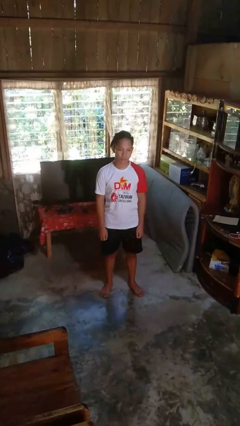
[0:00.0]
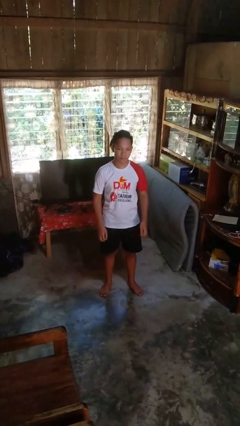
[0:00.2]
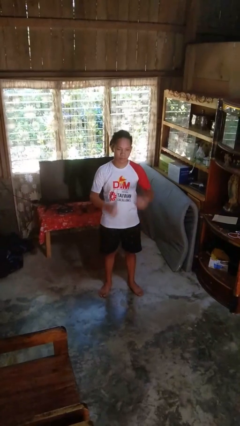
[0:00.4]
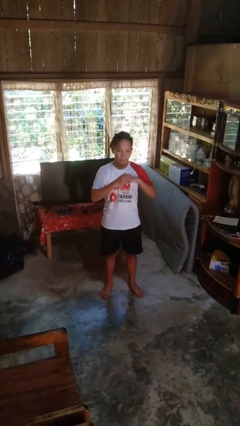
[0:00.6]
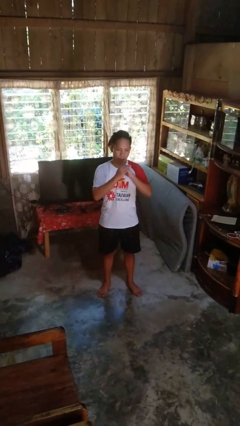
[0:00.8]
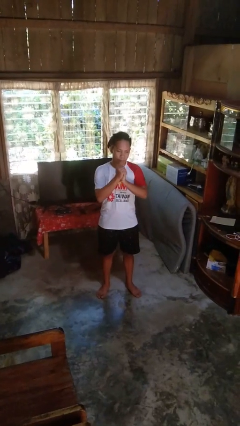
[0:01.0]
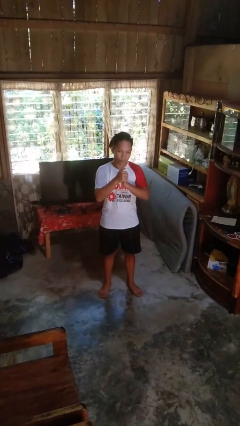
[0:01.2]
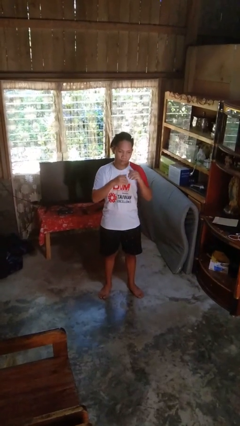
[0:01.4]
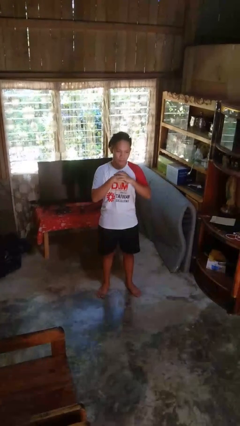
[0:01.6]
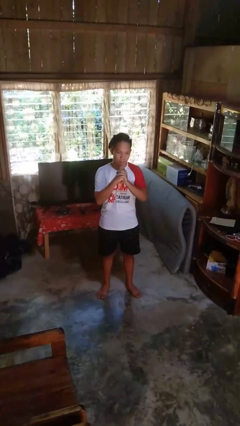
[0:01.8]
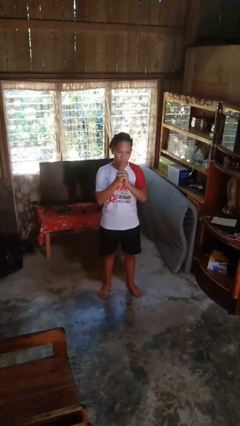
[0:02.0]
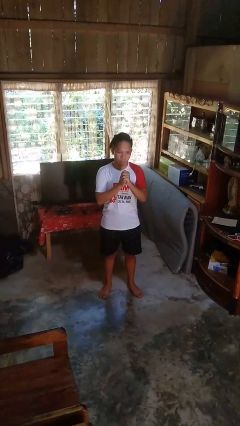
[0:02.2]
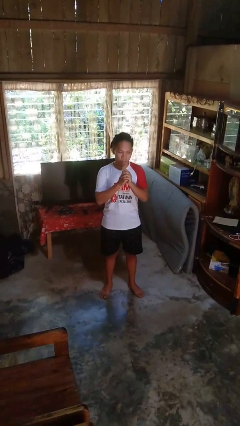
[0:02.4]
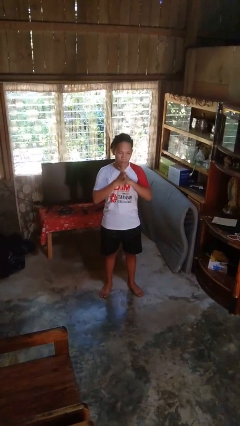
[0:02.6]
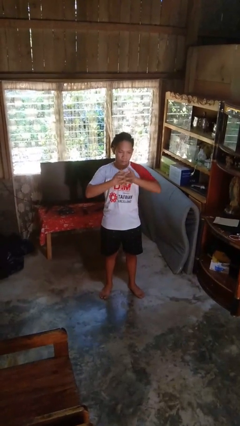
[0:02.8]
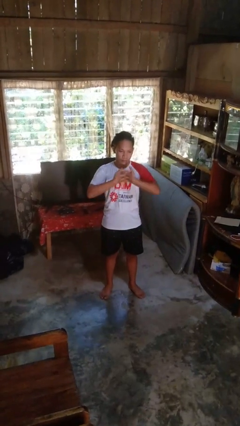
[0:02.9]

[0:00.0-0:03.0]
person cracks knuckles

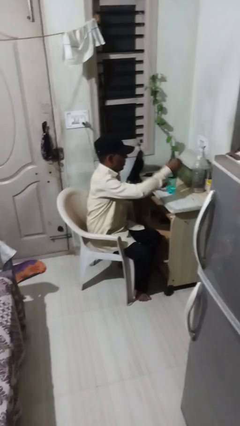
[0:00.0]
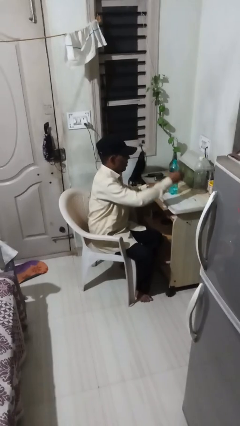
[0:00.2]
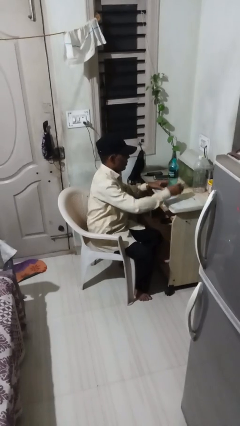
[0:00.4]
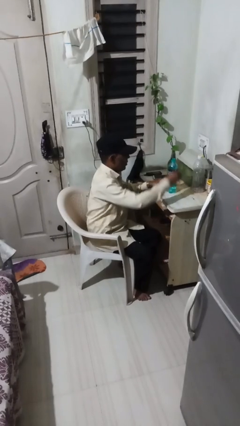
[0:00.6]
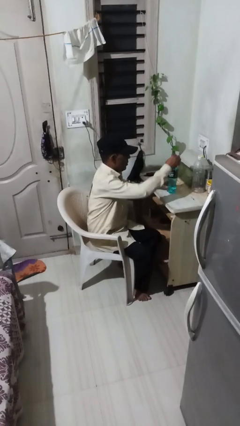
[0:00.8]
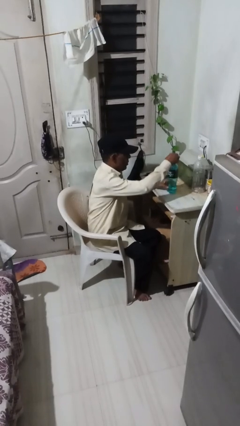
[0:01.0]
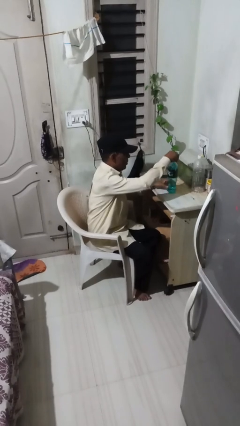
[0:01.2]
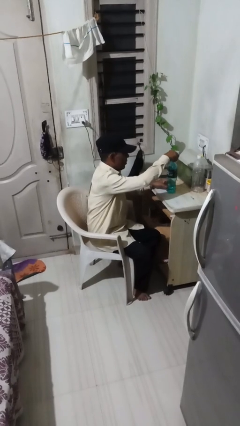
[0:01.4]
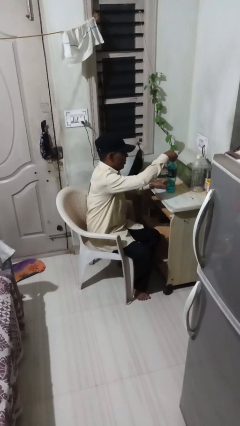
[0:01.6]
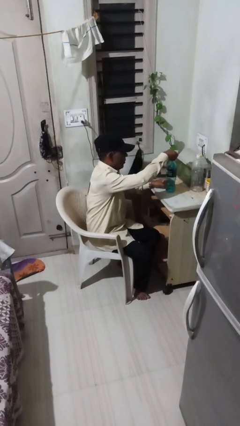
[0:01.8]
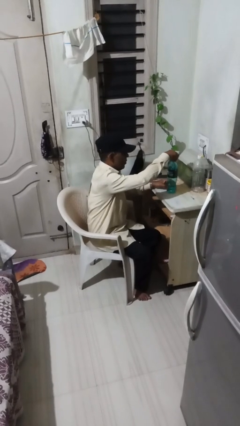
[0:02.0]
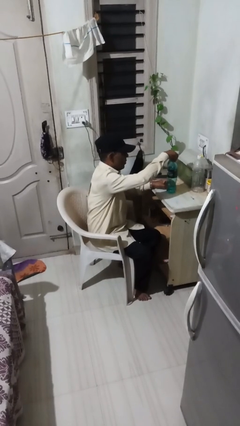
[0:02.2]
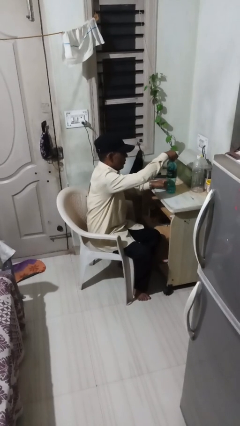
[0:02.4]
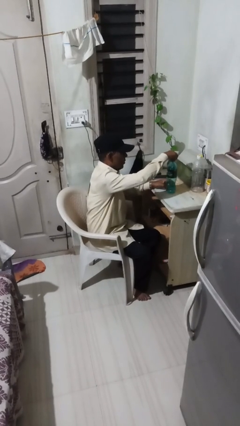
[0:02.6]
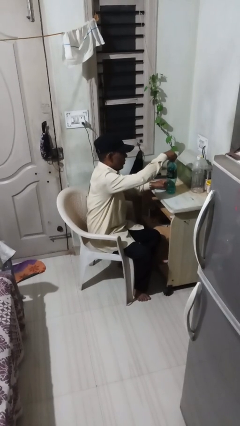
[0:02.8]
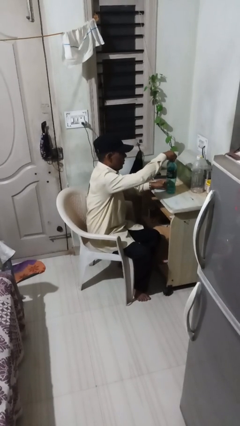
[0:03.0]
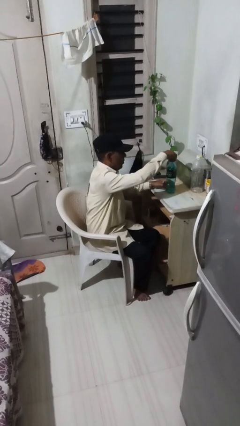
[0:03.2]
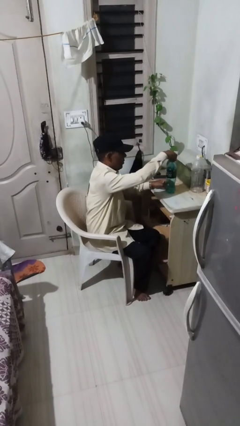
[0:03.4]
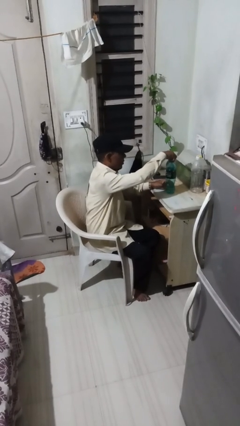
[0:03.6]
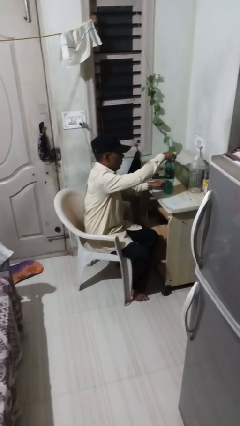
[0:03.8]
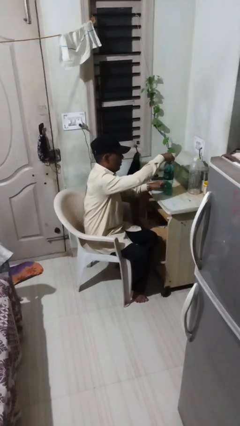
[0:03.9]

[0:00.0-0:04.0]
person screws lid to bottle

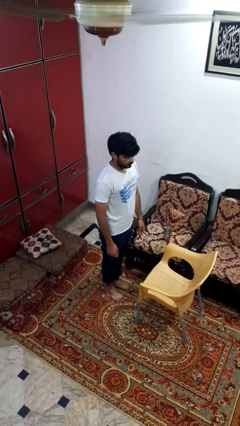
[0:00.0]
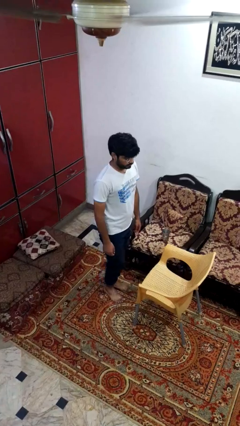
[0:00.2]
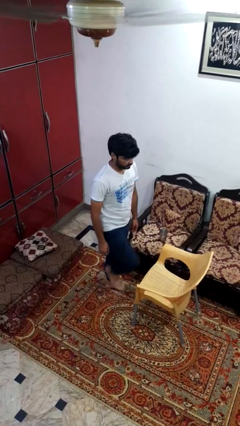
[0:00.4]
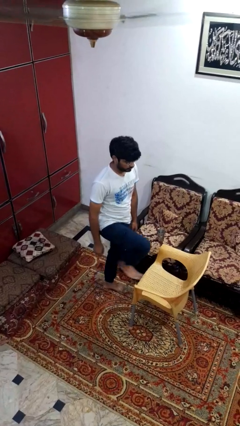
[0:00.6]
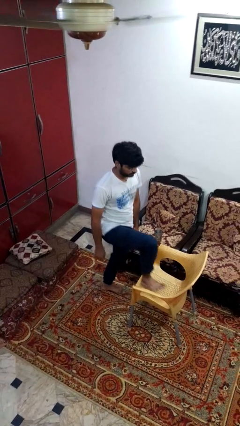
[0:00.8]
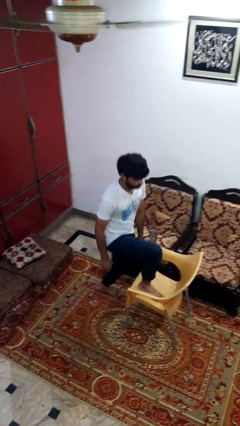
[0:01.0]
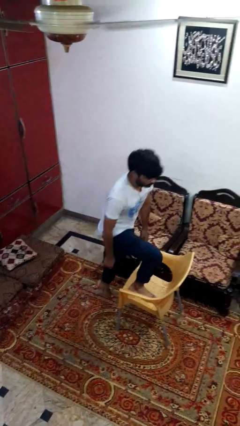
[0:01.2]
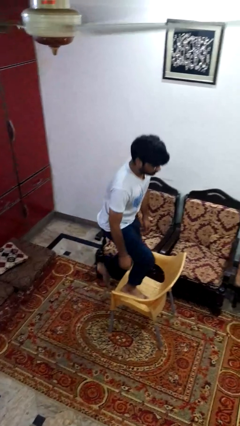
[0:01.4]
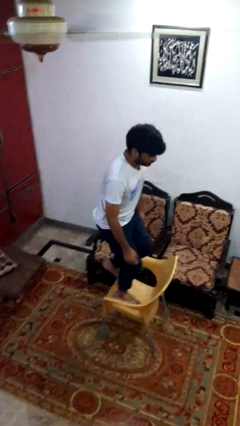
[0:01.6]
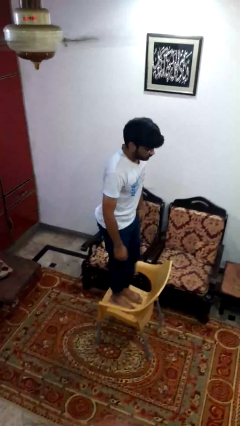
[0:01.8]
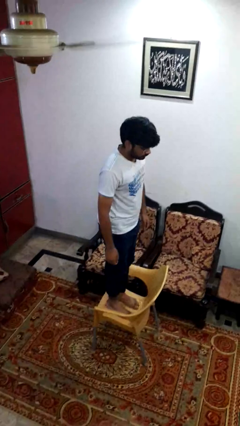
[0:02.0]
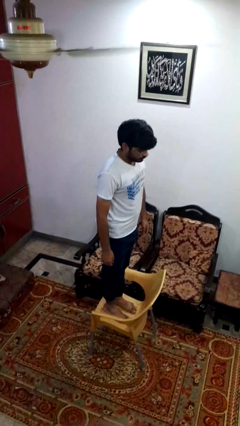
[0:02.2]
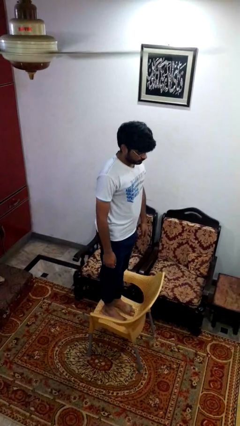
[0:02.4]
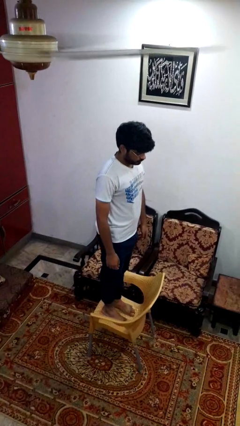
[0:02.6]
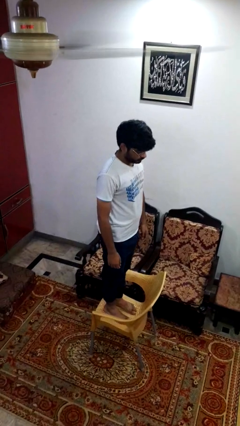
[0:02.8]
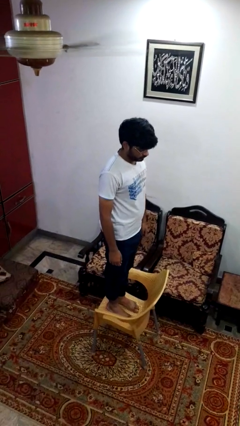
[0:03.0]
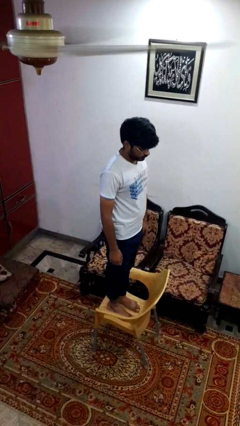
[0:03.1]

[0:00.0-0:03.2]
person climbs on chair

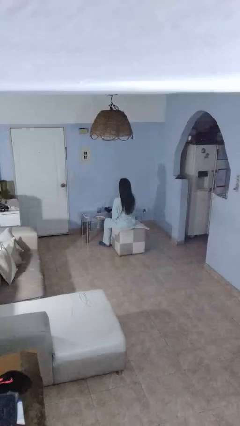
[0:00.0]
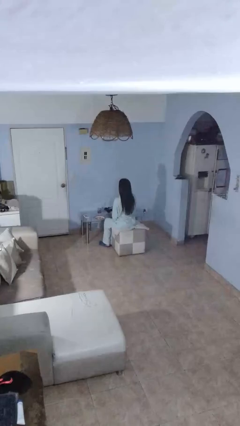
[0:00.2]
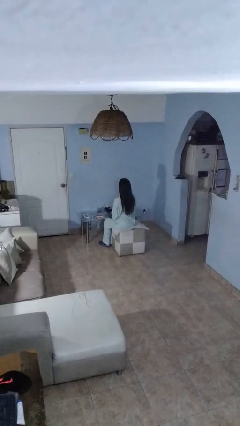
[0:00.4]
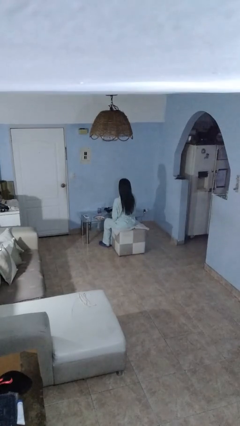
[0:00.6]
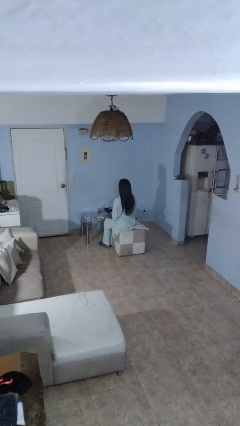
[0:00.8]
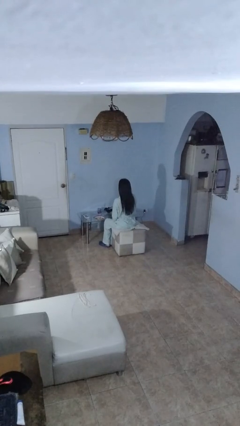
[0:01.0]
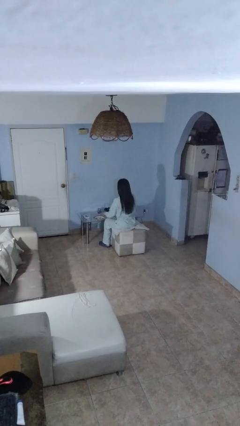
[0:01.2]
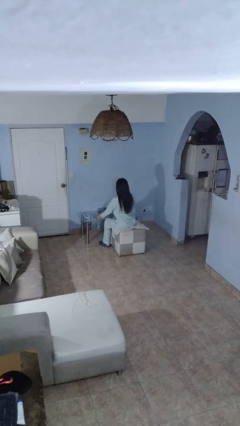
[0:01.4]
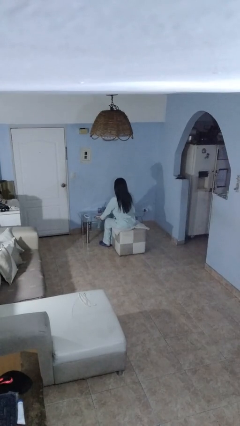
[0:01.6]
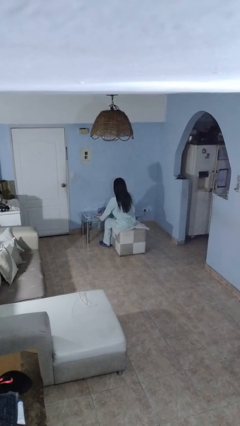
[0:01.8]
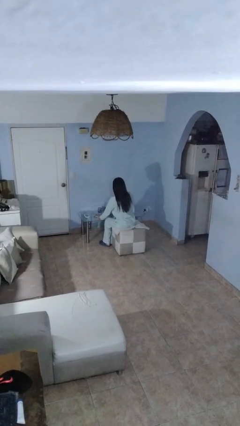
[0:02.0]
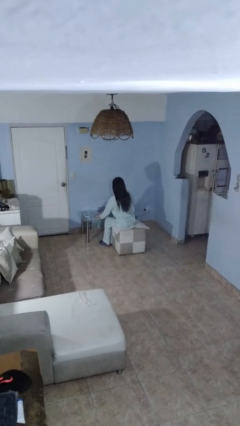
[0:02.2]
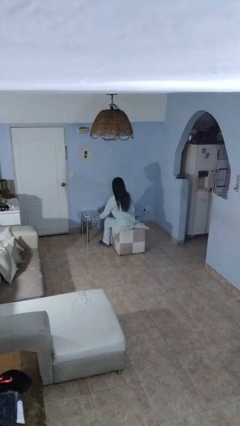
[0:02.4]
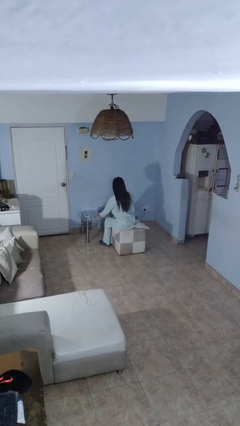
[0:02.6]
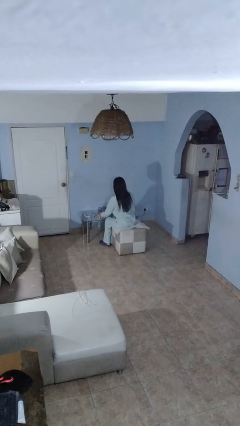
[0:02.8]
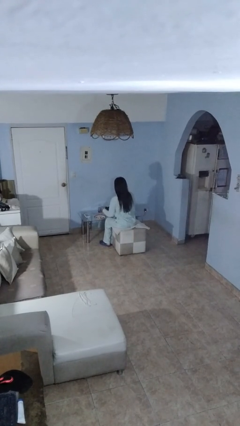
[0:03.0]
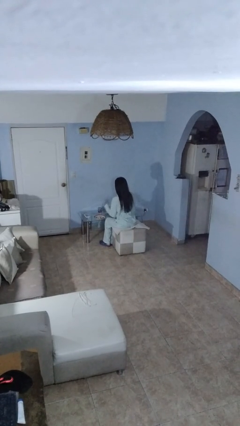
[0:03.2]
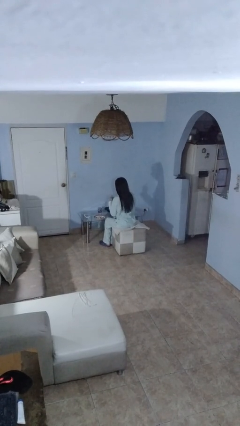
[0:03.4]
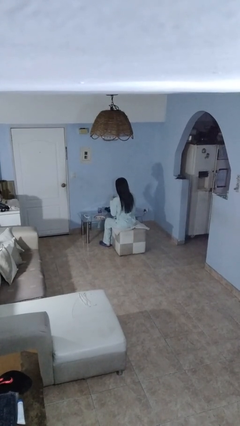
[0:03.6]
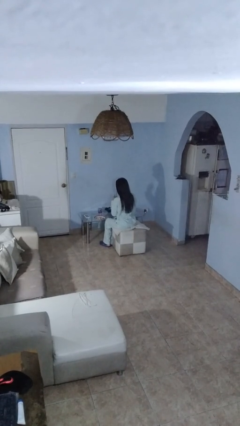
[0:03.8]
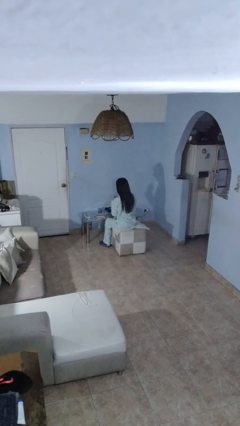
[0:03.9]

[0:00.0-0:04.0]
person turns on lamp

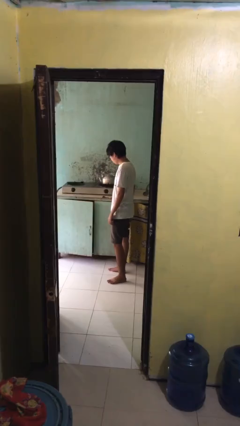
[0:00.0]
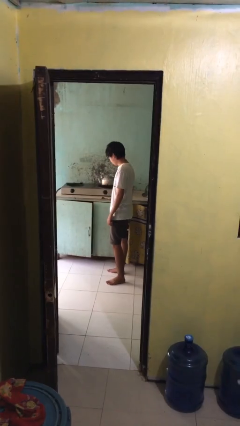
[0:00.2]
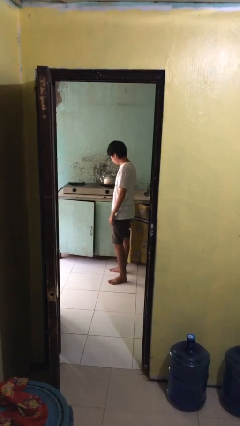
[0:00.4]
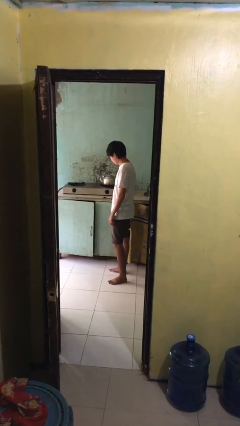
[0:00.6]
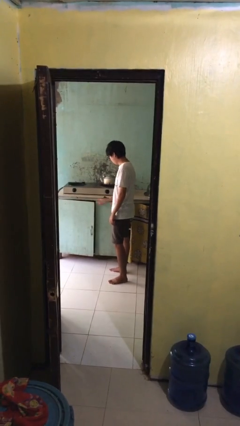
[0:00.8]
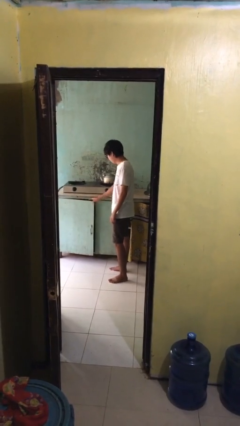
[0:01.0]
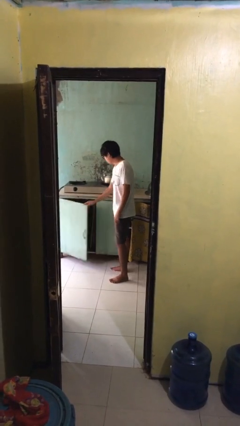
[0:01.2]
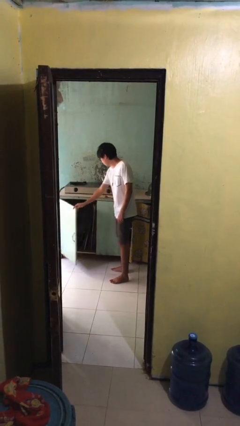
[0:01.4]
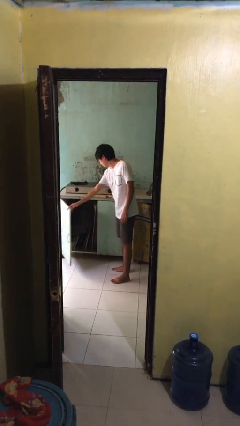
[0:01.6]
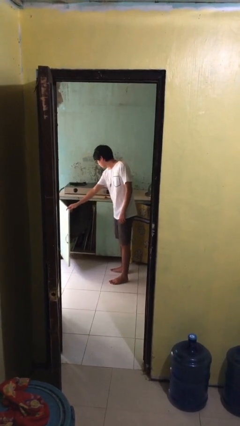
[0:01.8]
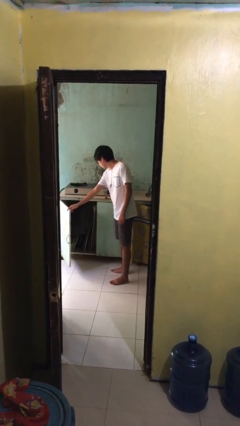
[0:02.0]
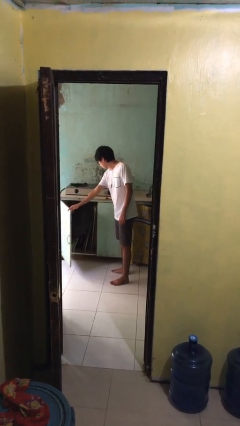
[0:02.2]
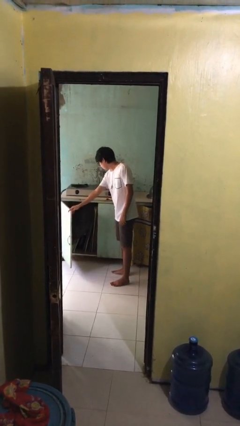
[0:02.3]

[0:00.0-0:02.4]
person opens cabinet

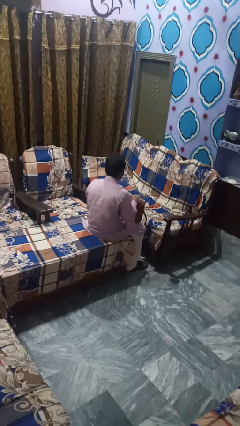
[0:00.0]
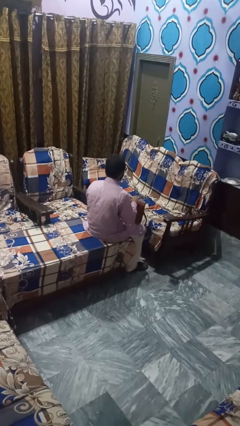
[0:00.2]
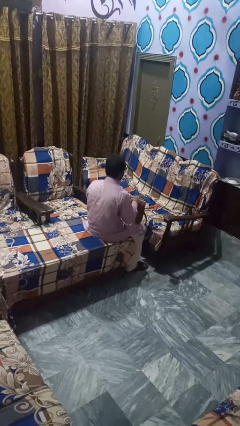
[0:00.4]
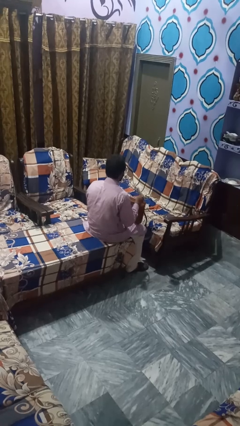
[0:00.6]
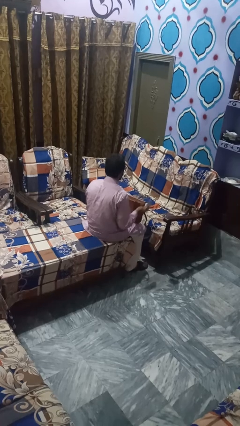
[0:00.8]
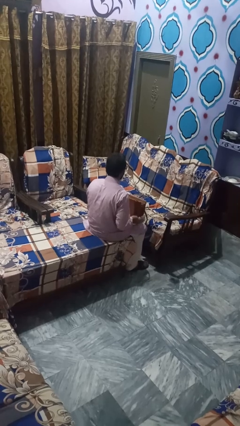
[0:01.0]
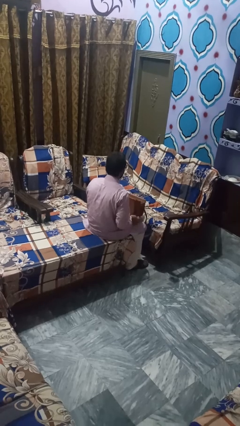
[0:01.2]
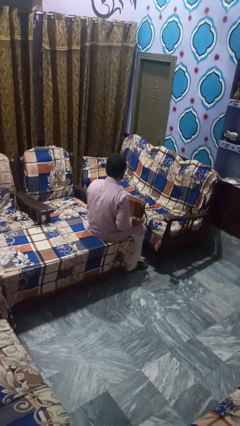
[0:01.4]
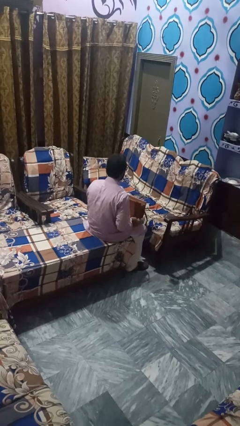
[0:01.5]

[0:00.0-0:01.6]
person puts object into bag
